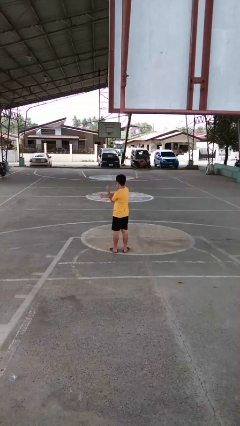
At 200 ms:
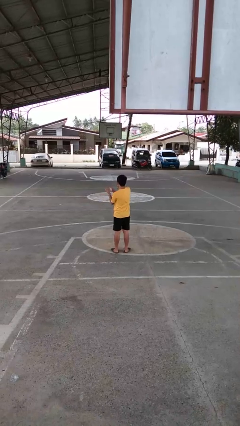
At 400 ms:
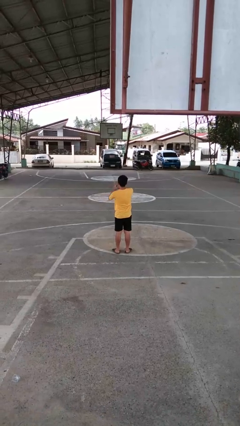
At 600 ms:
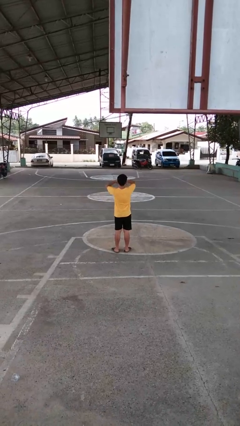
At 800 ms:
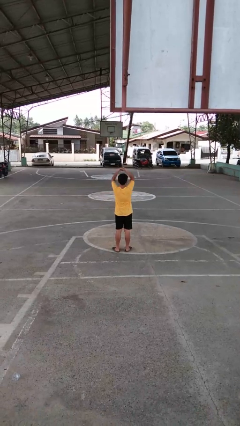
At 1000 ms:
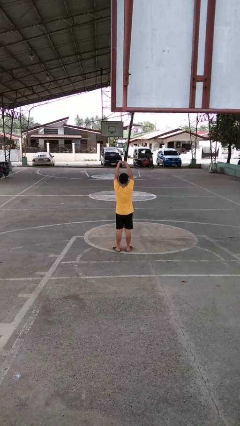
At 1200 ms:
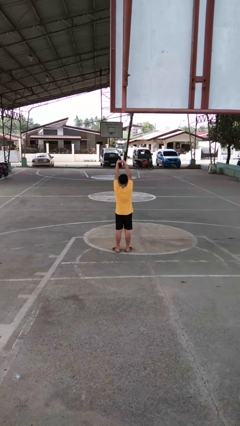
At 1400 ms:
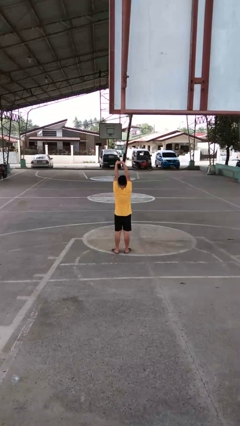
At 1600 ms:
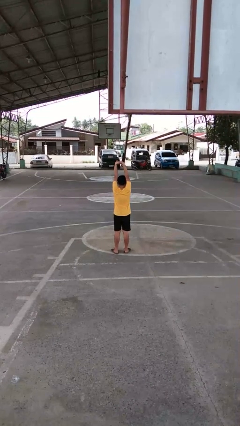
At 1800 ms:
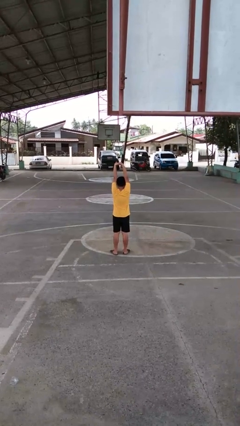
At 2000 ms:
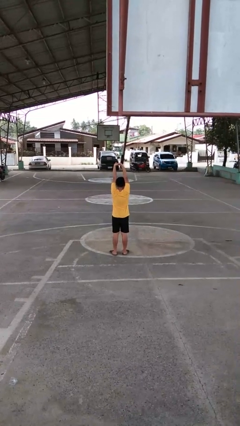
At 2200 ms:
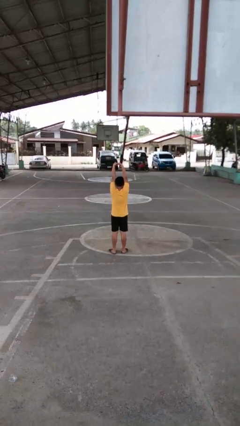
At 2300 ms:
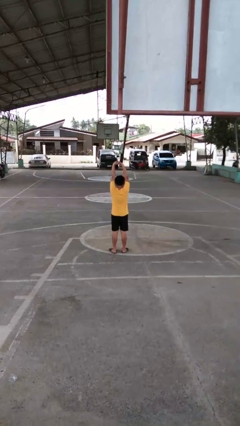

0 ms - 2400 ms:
person stretches arms over head

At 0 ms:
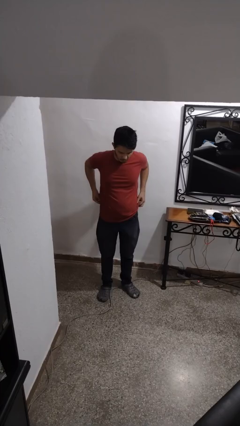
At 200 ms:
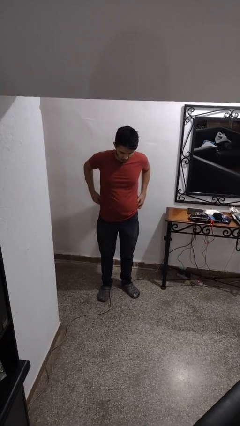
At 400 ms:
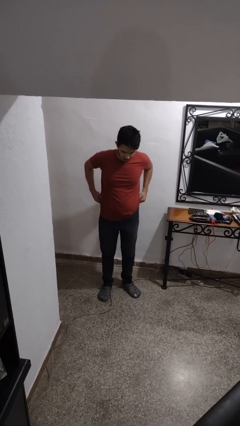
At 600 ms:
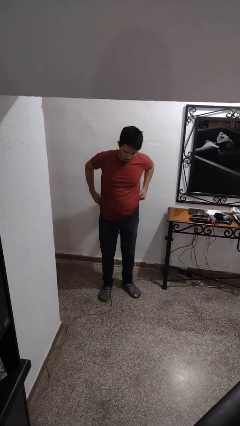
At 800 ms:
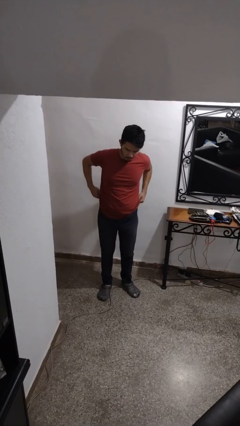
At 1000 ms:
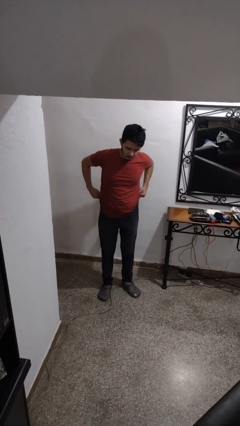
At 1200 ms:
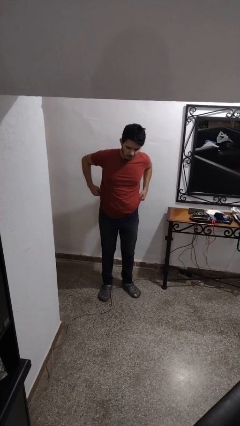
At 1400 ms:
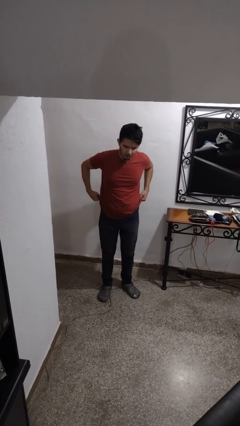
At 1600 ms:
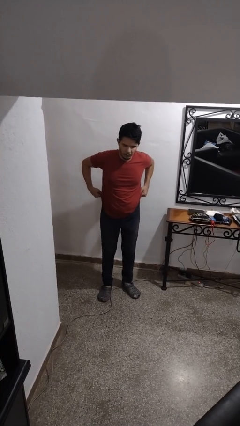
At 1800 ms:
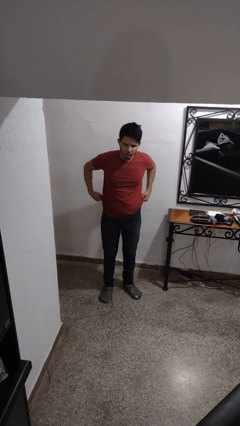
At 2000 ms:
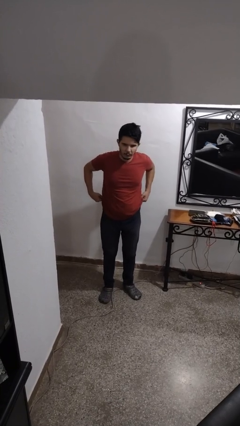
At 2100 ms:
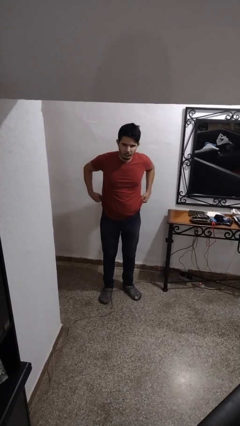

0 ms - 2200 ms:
person hikes up pants

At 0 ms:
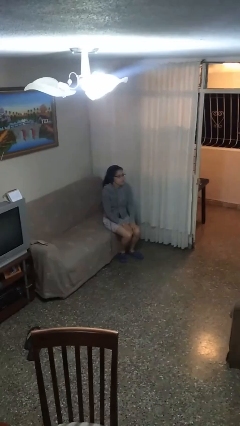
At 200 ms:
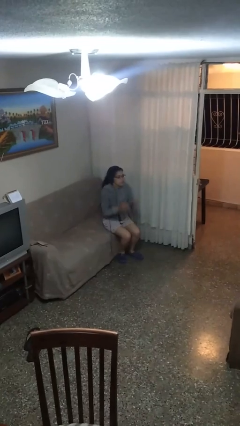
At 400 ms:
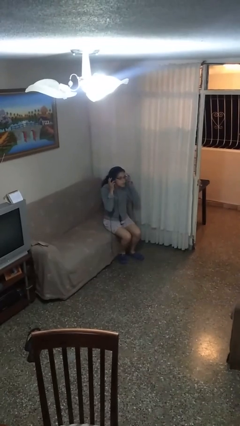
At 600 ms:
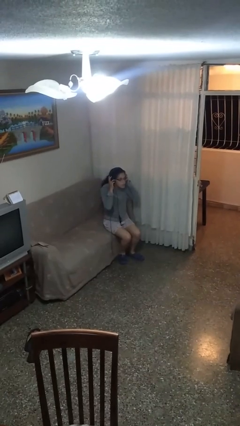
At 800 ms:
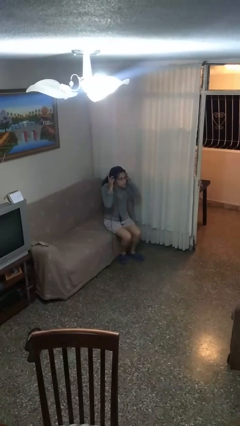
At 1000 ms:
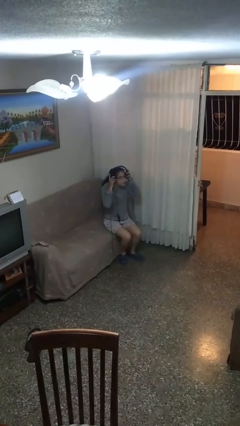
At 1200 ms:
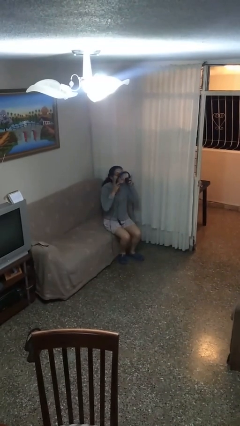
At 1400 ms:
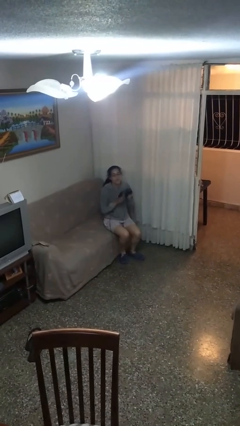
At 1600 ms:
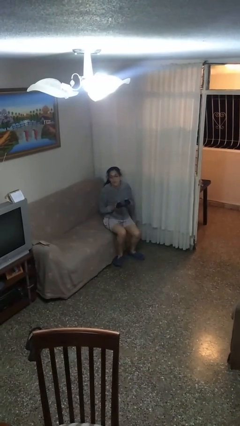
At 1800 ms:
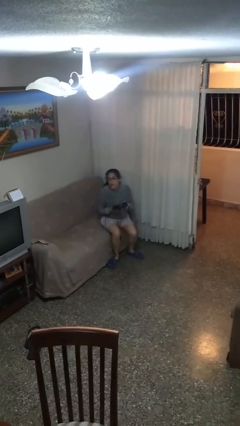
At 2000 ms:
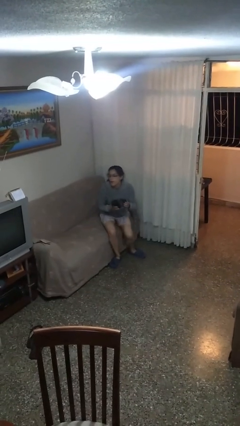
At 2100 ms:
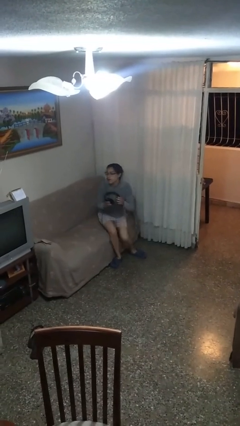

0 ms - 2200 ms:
person takes off headphones

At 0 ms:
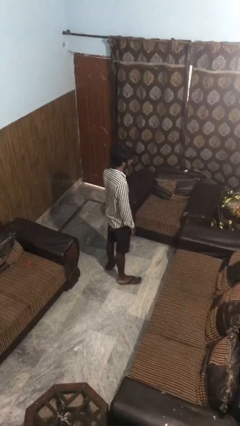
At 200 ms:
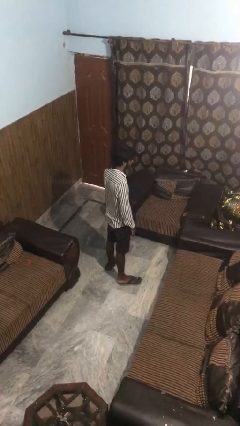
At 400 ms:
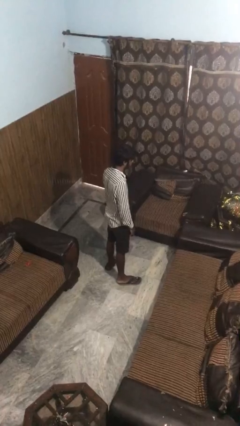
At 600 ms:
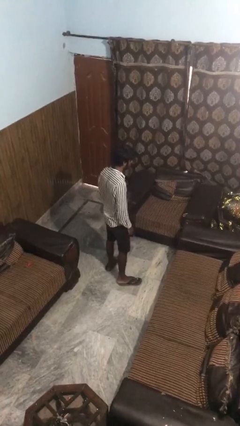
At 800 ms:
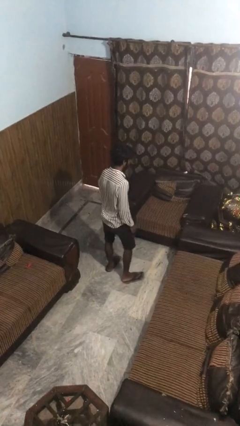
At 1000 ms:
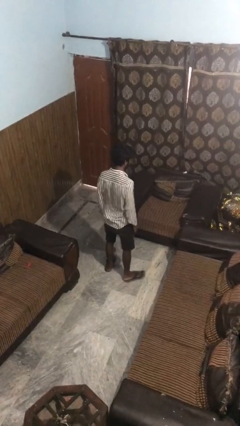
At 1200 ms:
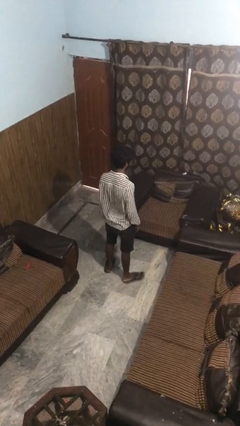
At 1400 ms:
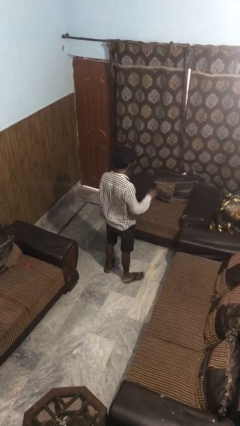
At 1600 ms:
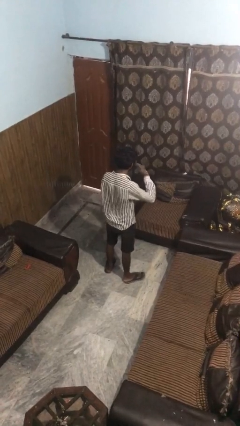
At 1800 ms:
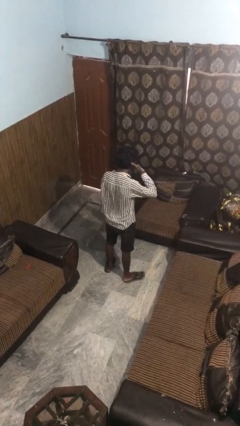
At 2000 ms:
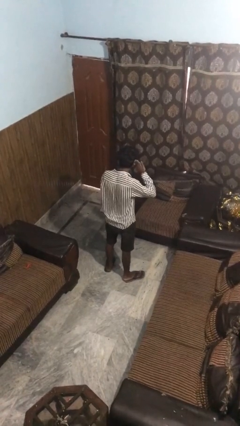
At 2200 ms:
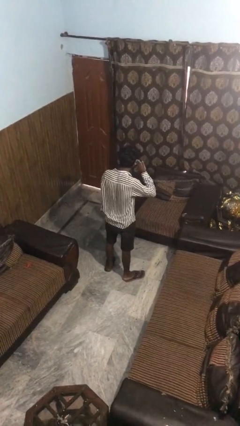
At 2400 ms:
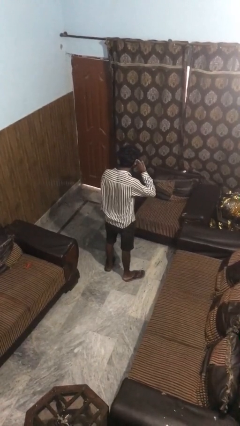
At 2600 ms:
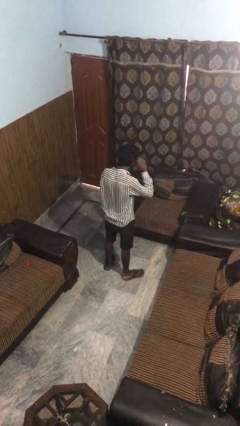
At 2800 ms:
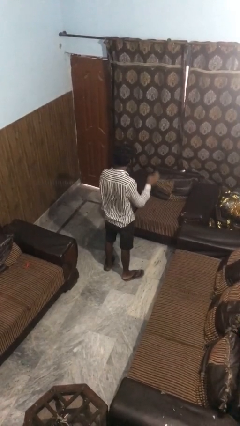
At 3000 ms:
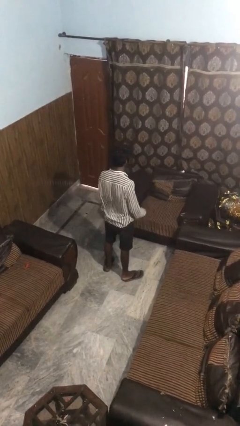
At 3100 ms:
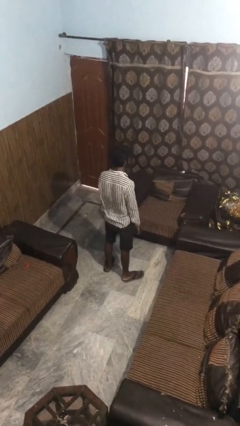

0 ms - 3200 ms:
person gestures listen closely

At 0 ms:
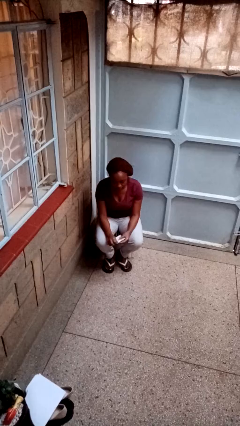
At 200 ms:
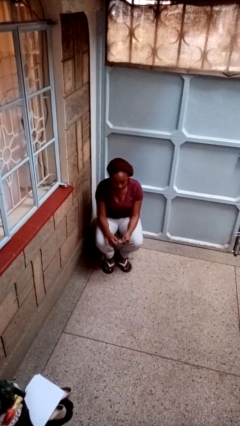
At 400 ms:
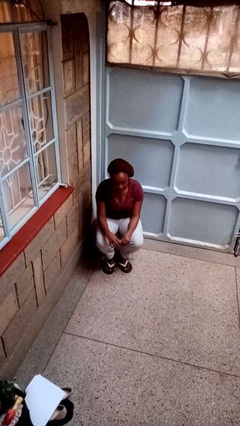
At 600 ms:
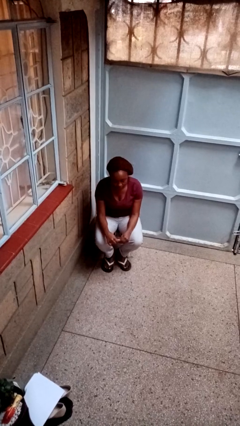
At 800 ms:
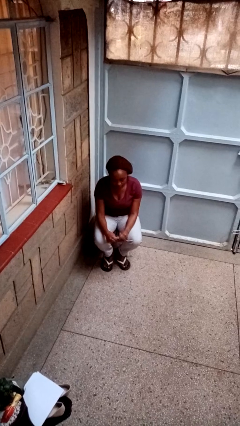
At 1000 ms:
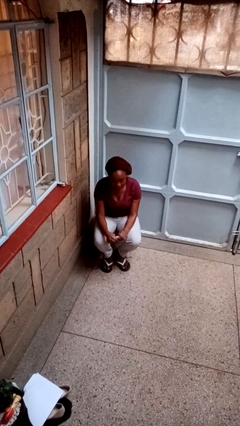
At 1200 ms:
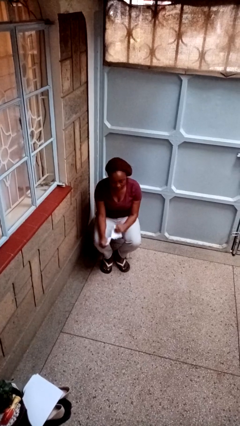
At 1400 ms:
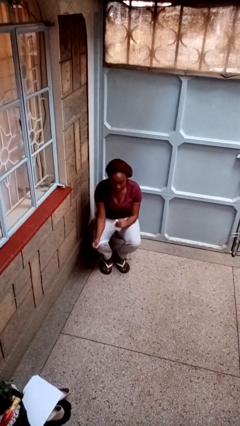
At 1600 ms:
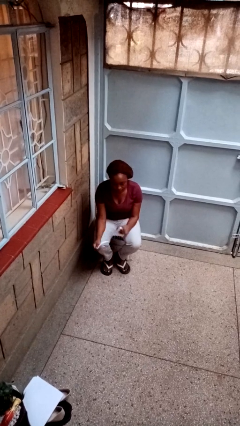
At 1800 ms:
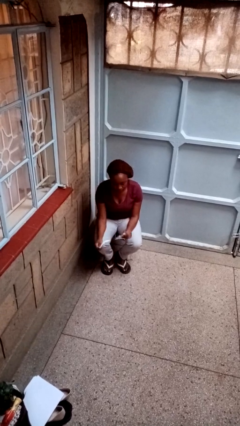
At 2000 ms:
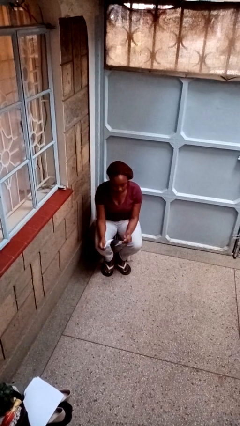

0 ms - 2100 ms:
person tears paper

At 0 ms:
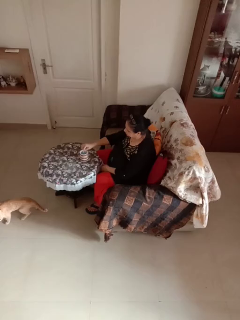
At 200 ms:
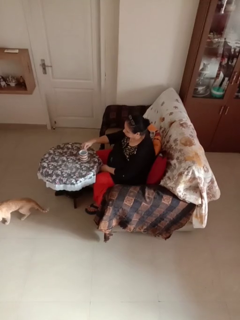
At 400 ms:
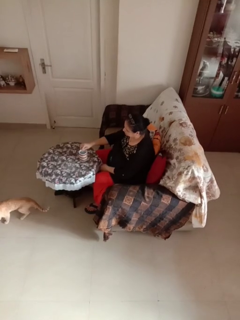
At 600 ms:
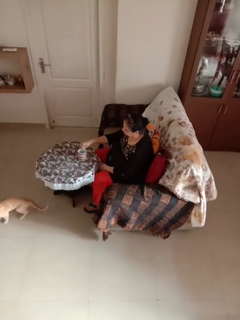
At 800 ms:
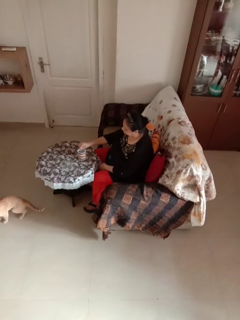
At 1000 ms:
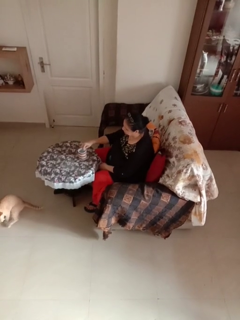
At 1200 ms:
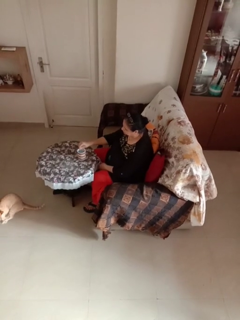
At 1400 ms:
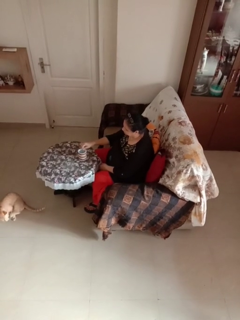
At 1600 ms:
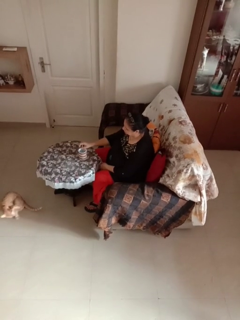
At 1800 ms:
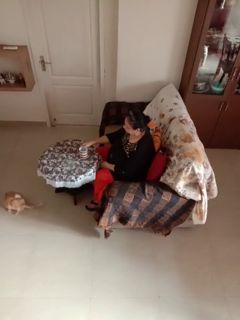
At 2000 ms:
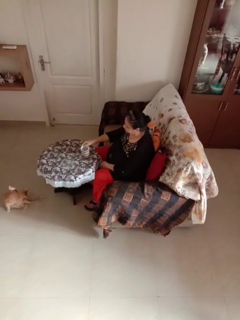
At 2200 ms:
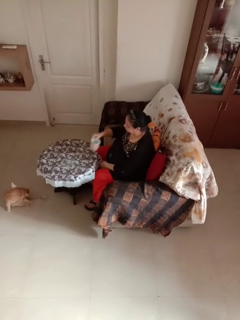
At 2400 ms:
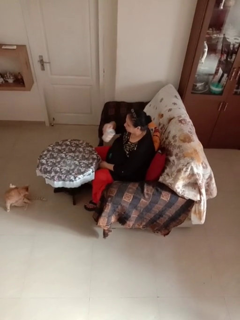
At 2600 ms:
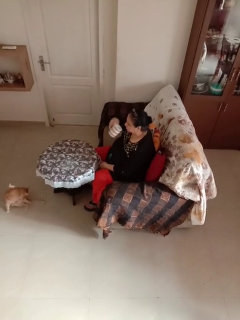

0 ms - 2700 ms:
person stirs mug

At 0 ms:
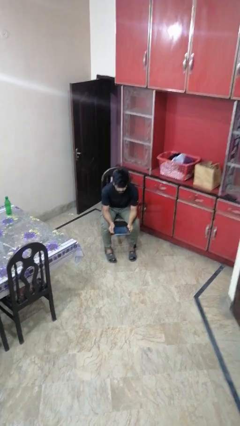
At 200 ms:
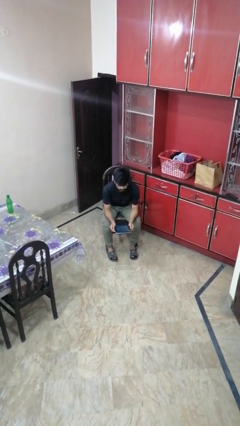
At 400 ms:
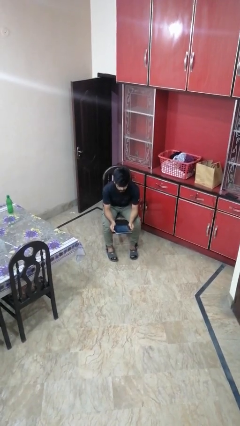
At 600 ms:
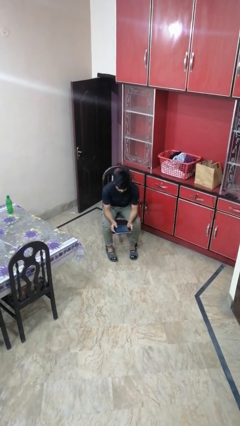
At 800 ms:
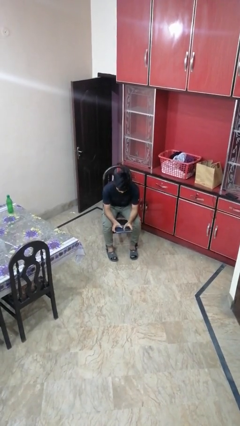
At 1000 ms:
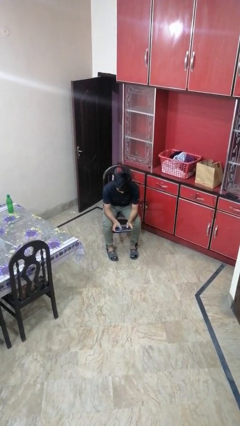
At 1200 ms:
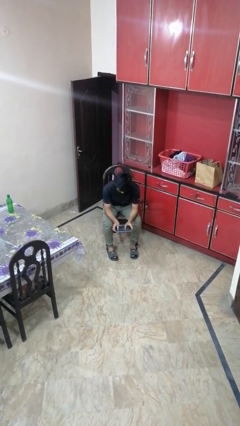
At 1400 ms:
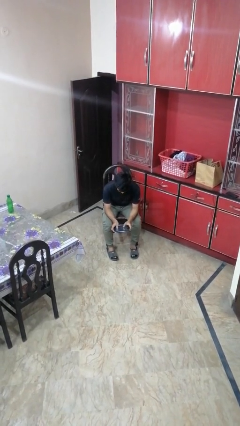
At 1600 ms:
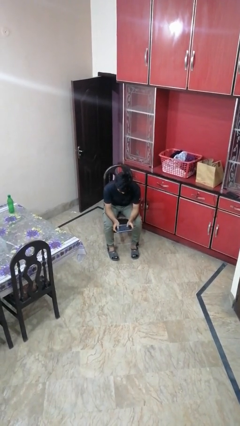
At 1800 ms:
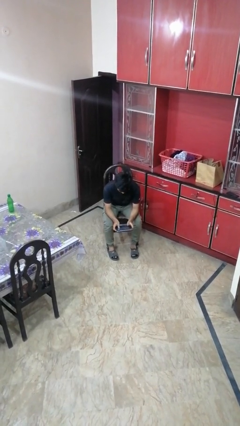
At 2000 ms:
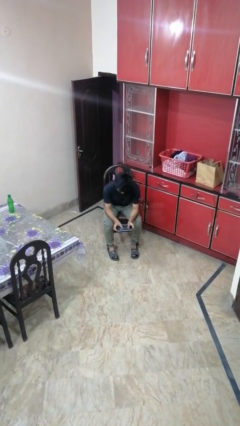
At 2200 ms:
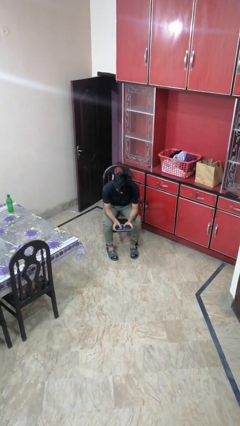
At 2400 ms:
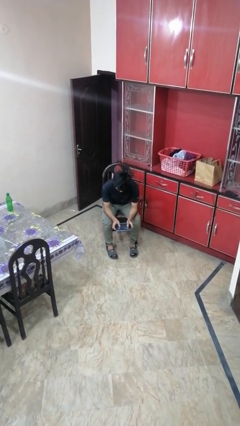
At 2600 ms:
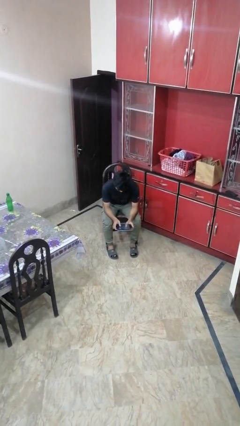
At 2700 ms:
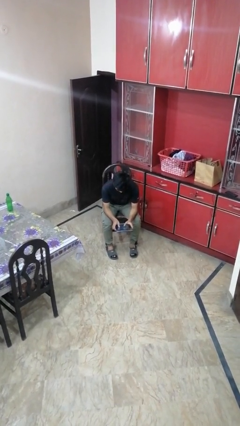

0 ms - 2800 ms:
person interacts with tablet
